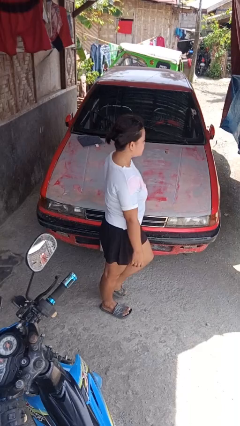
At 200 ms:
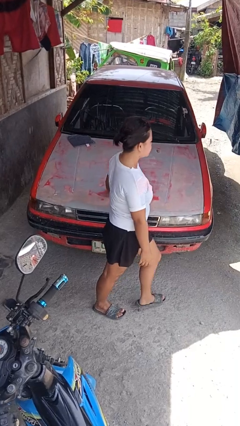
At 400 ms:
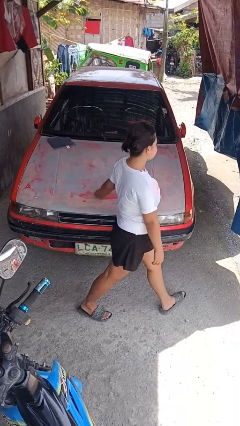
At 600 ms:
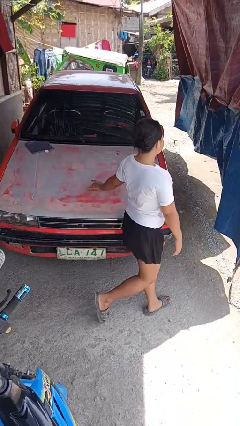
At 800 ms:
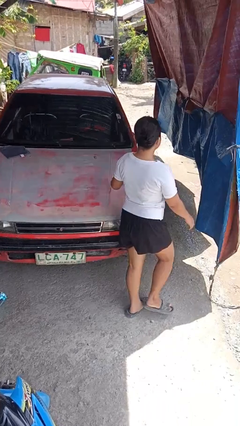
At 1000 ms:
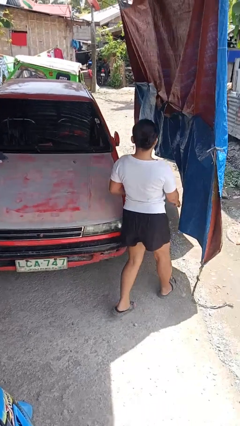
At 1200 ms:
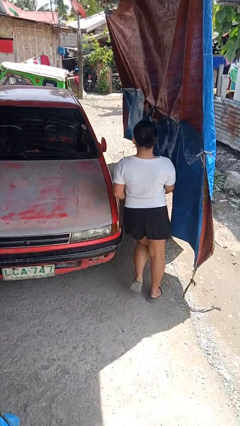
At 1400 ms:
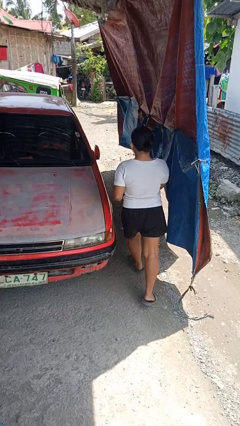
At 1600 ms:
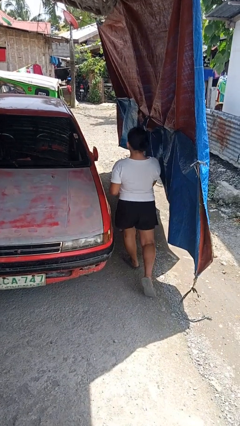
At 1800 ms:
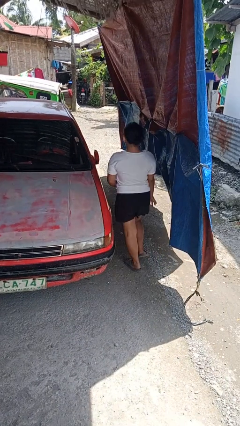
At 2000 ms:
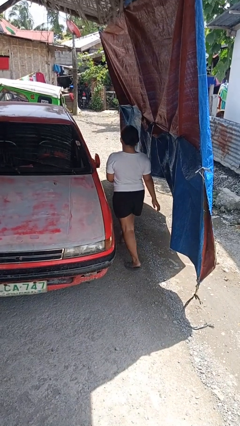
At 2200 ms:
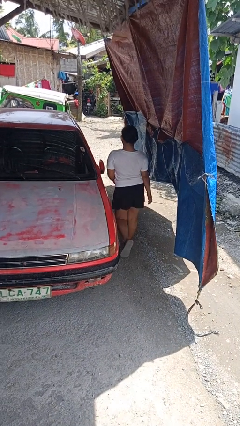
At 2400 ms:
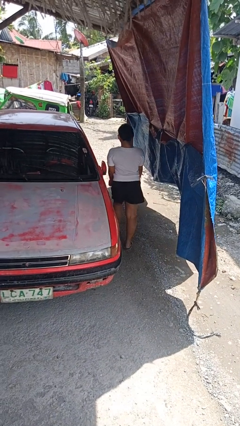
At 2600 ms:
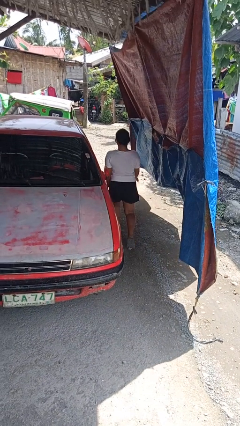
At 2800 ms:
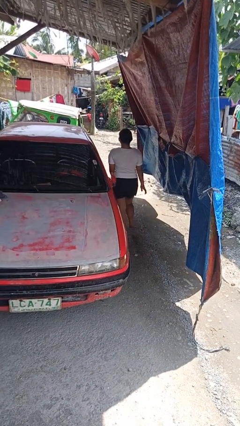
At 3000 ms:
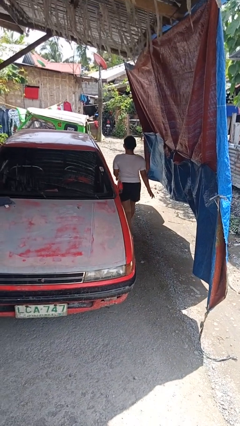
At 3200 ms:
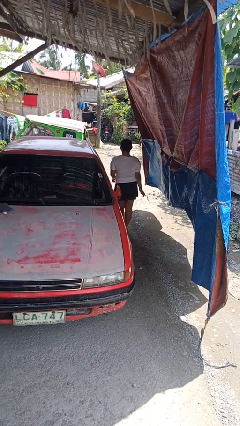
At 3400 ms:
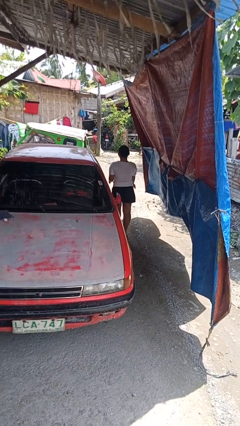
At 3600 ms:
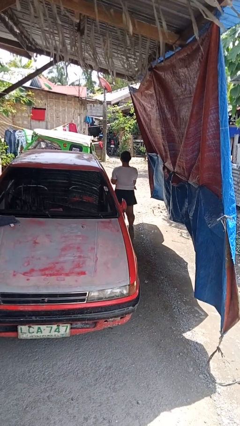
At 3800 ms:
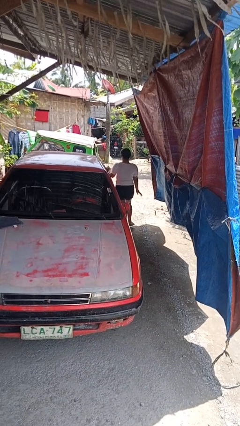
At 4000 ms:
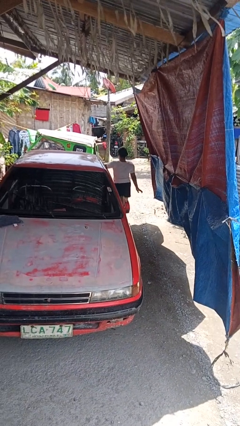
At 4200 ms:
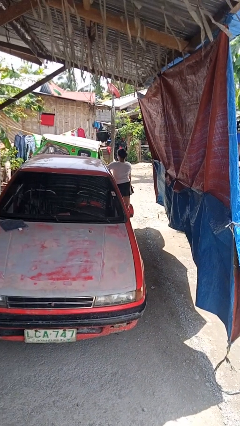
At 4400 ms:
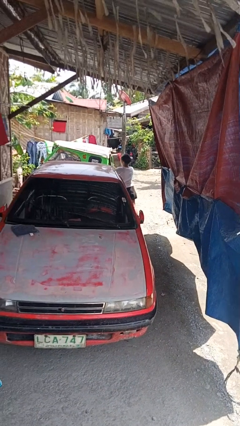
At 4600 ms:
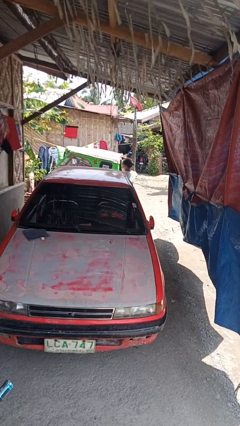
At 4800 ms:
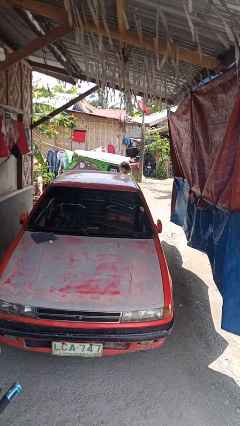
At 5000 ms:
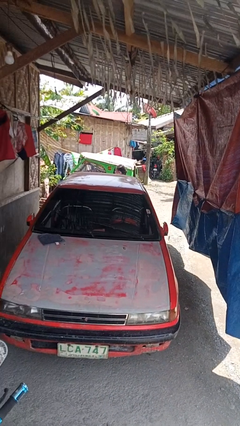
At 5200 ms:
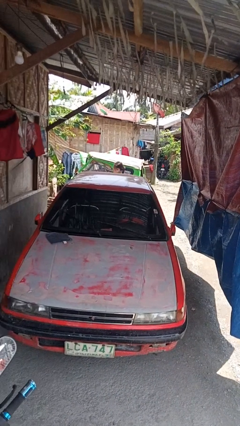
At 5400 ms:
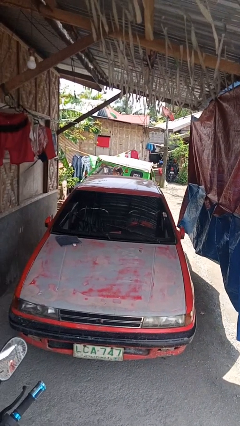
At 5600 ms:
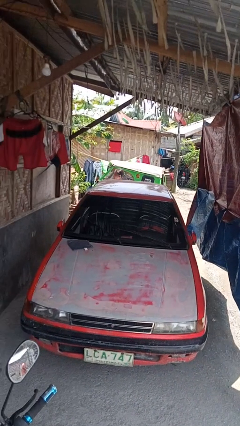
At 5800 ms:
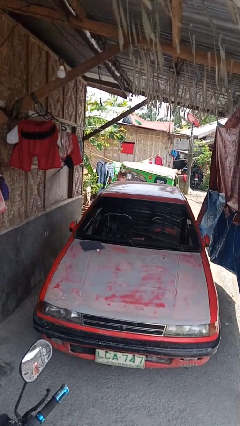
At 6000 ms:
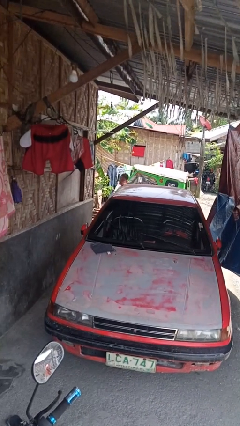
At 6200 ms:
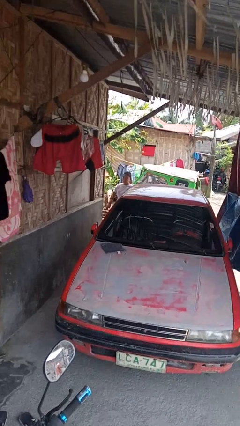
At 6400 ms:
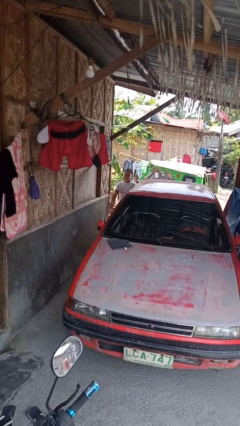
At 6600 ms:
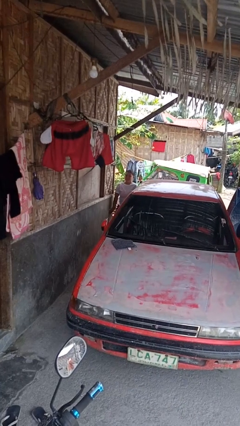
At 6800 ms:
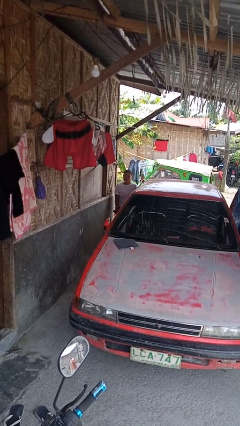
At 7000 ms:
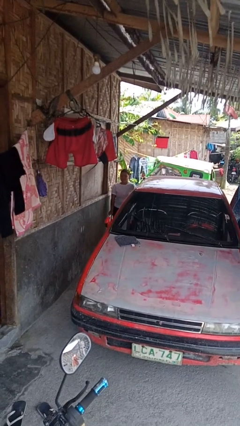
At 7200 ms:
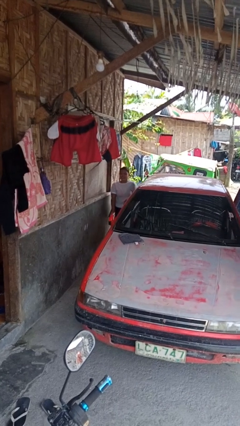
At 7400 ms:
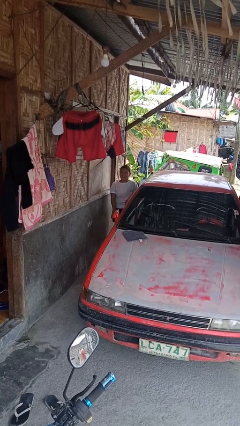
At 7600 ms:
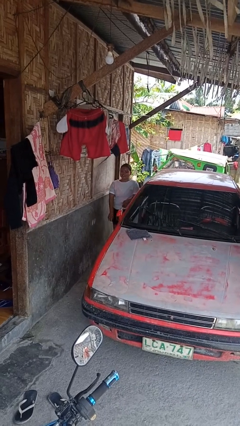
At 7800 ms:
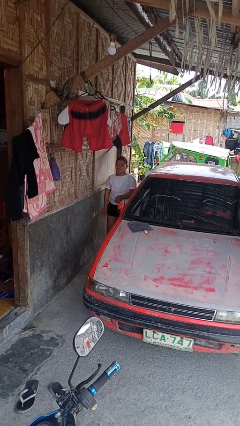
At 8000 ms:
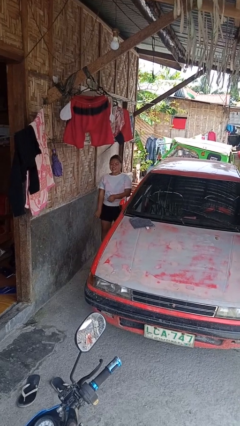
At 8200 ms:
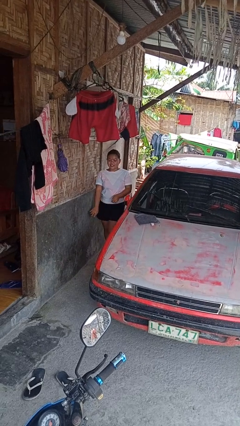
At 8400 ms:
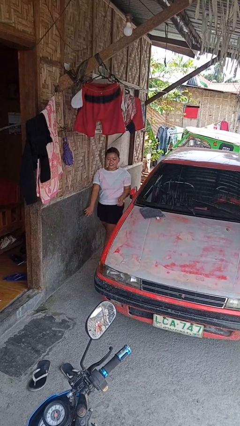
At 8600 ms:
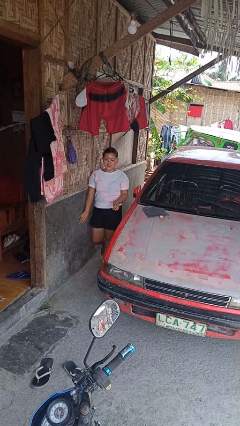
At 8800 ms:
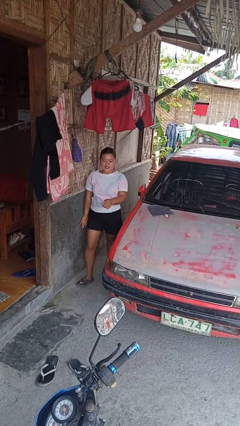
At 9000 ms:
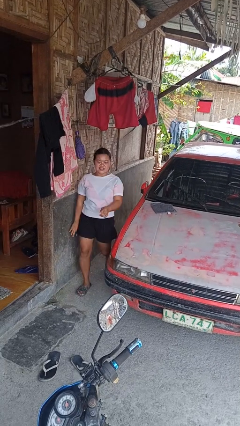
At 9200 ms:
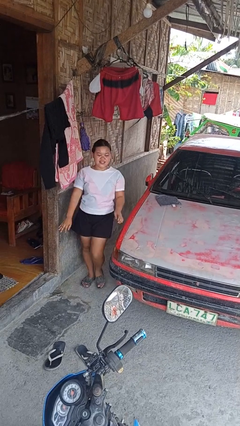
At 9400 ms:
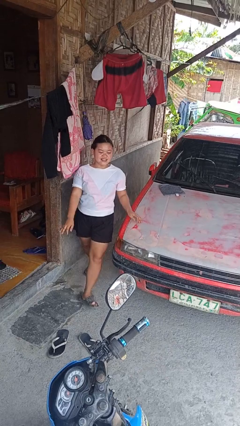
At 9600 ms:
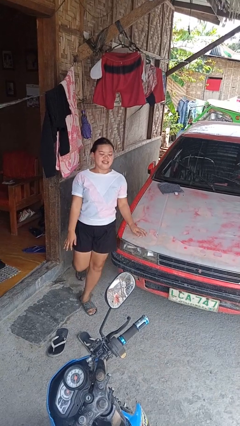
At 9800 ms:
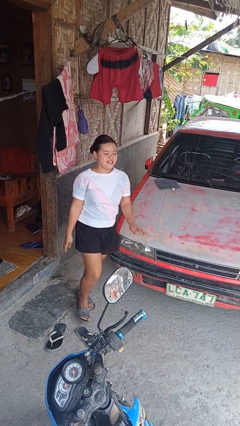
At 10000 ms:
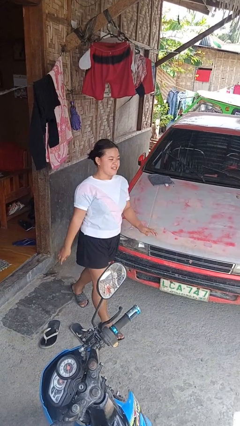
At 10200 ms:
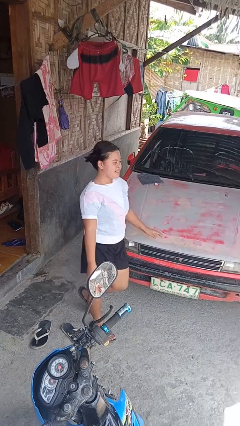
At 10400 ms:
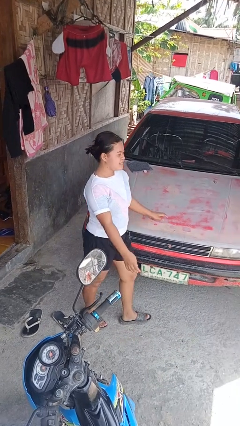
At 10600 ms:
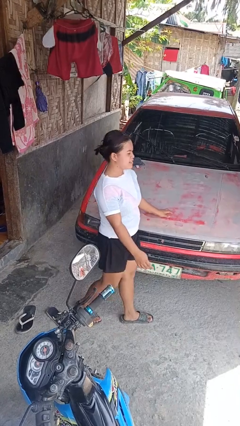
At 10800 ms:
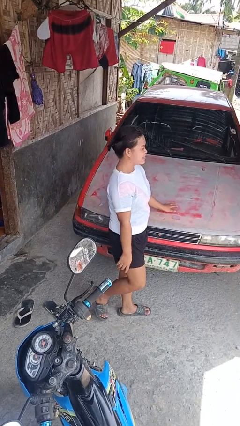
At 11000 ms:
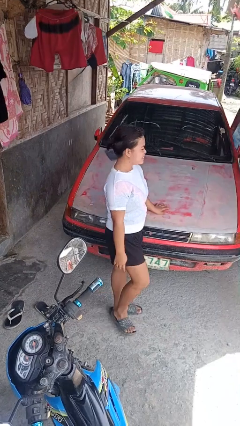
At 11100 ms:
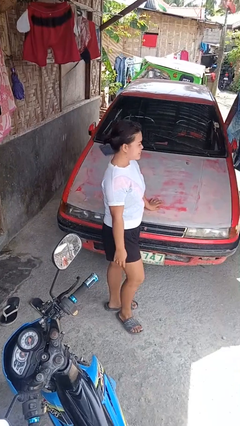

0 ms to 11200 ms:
person walks around car

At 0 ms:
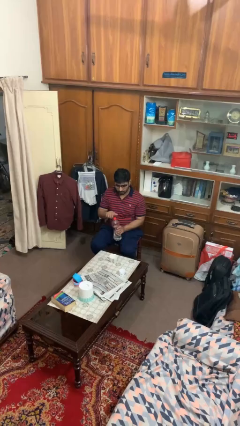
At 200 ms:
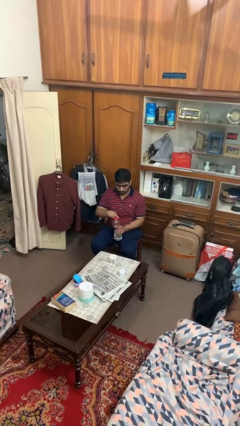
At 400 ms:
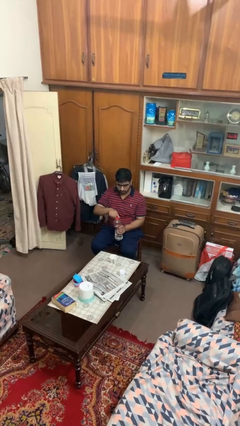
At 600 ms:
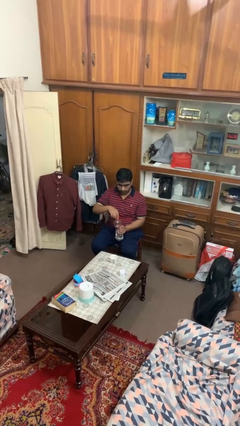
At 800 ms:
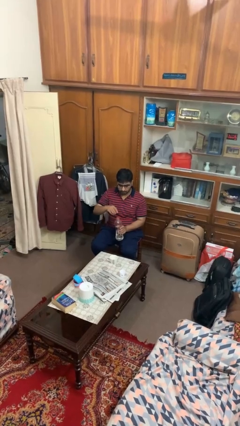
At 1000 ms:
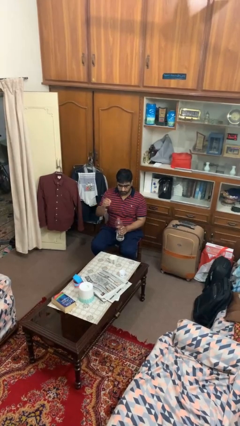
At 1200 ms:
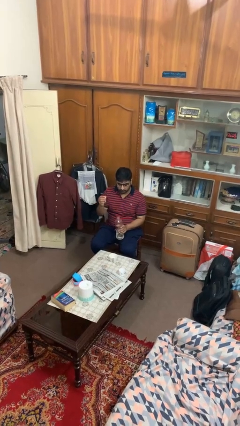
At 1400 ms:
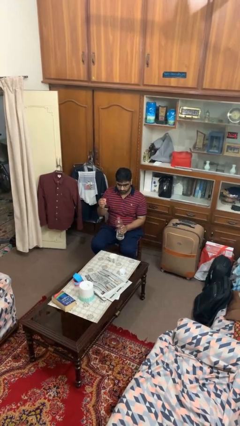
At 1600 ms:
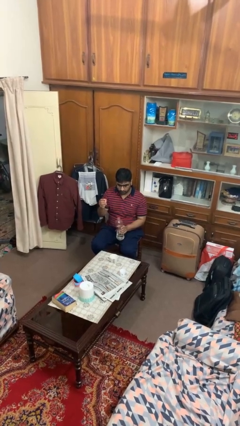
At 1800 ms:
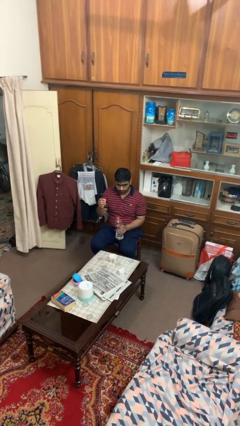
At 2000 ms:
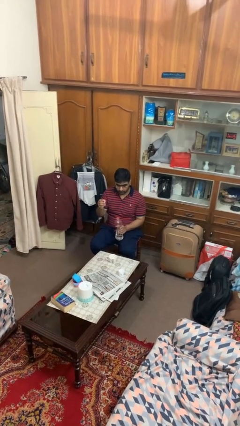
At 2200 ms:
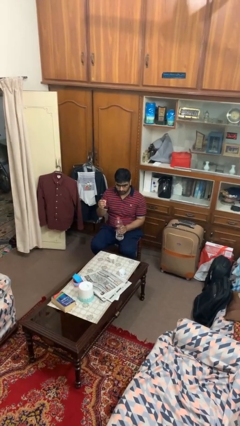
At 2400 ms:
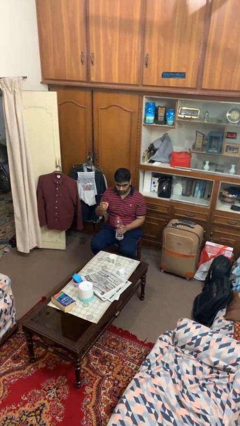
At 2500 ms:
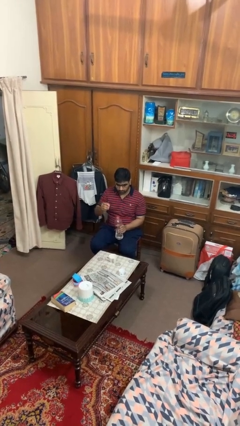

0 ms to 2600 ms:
person unscrews lid from bottle

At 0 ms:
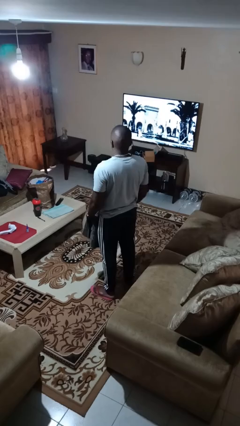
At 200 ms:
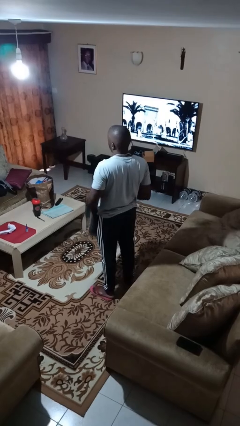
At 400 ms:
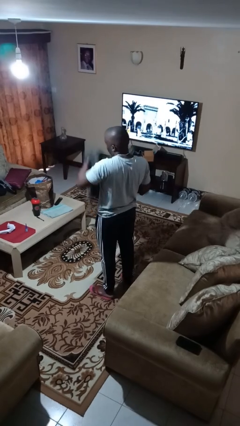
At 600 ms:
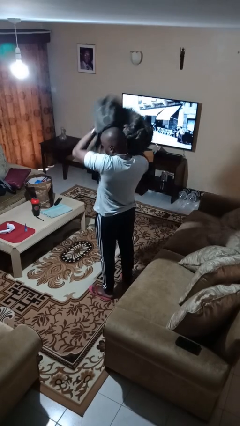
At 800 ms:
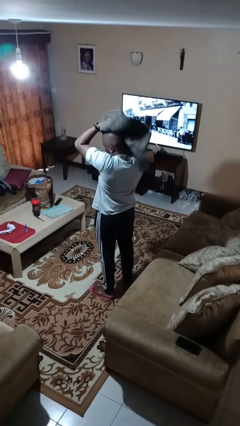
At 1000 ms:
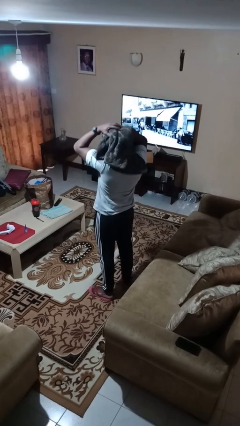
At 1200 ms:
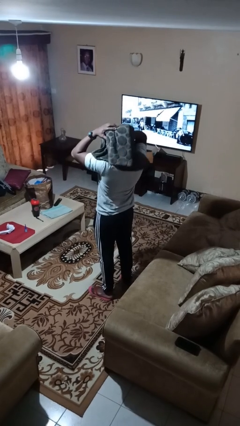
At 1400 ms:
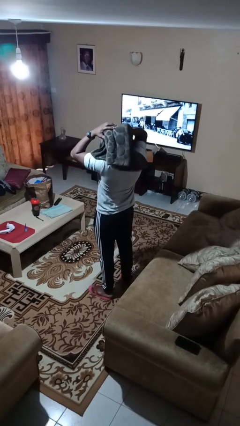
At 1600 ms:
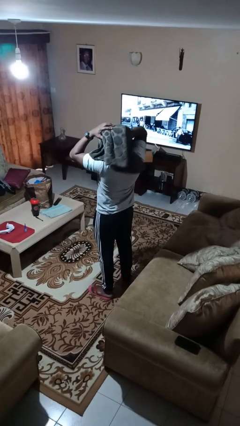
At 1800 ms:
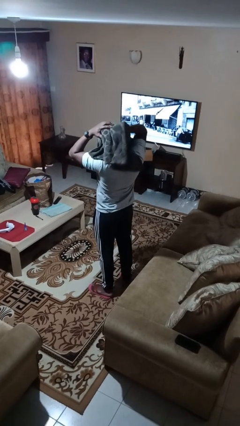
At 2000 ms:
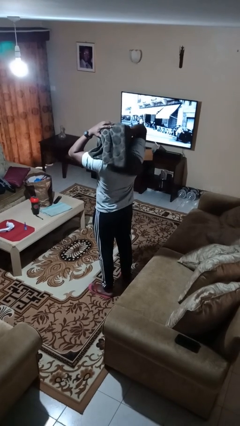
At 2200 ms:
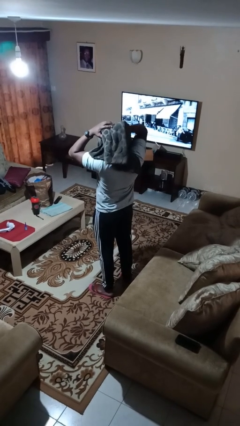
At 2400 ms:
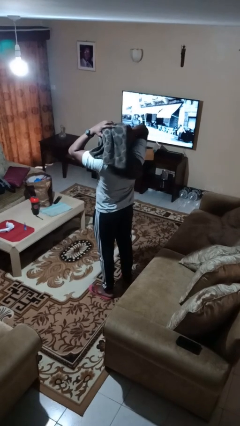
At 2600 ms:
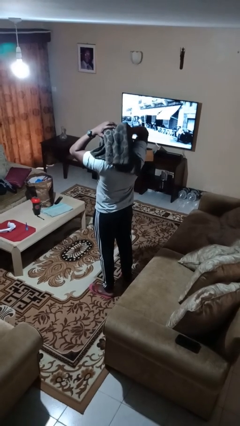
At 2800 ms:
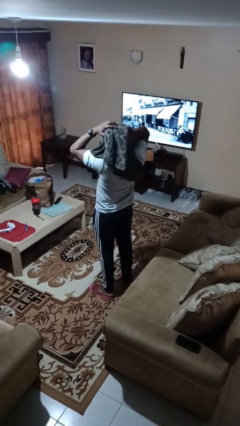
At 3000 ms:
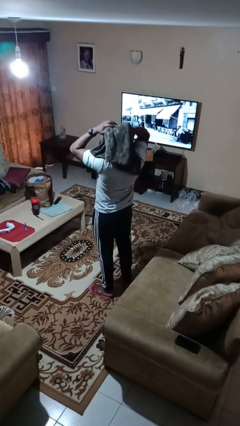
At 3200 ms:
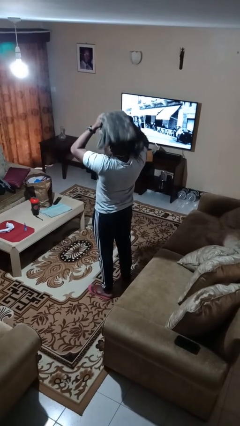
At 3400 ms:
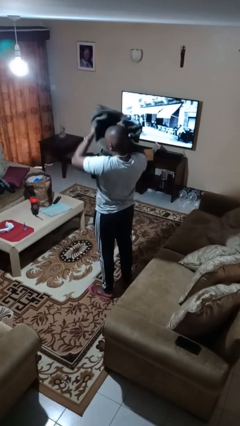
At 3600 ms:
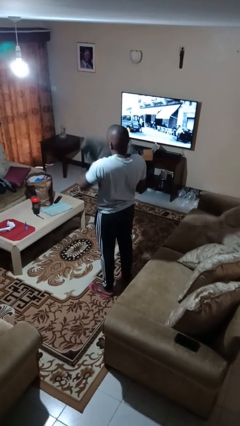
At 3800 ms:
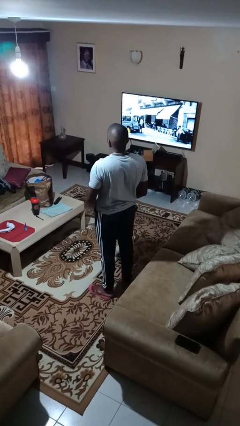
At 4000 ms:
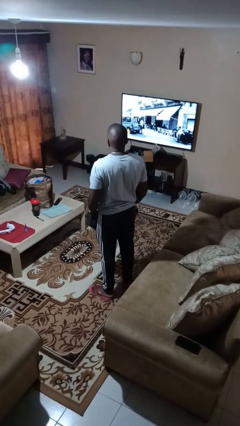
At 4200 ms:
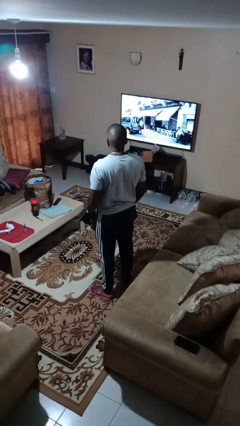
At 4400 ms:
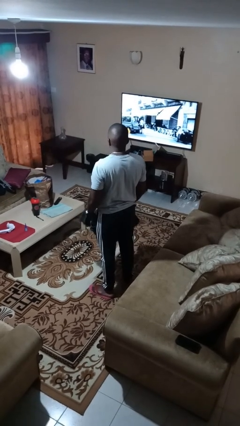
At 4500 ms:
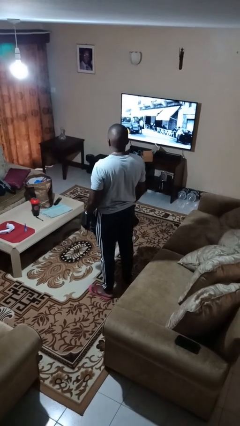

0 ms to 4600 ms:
person dries hair with towel
